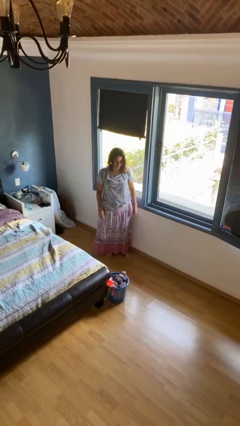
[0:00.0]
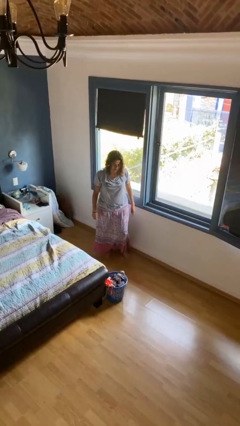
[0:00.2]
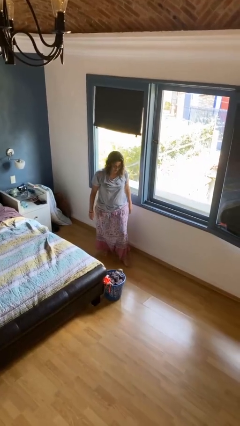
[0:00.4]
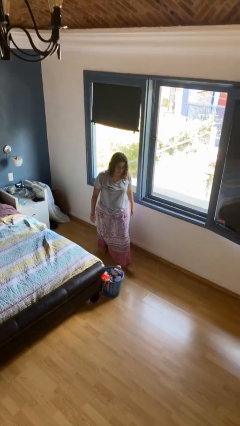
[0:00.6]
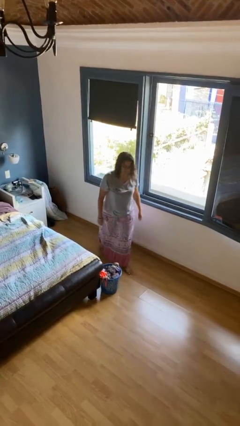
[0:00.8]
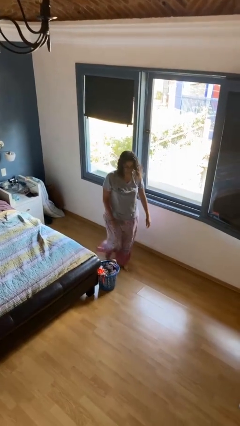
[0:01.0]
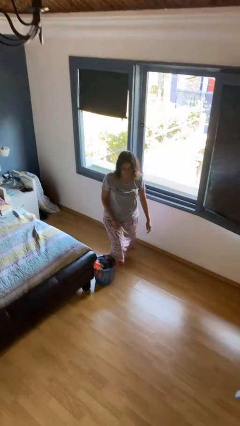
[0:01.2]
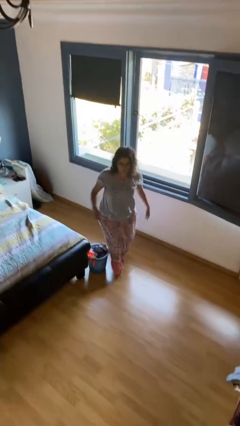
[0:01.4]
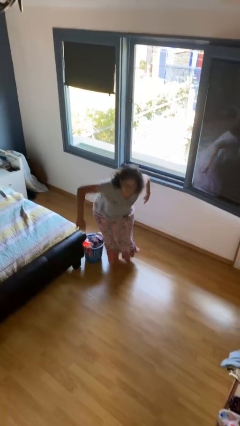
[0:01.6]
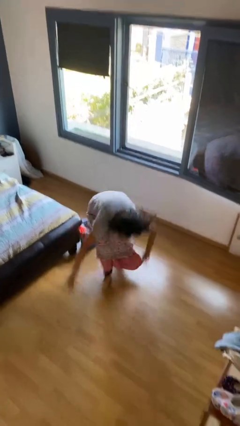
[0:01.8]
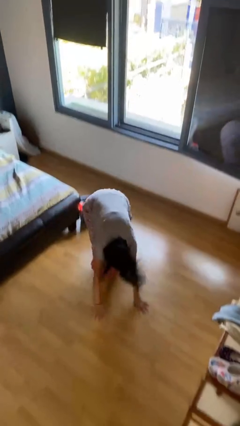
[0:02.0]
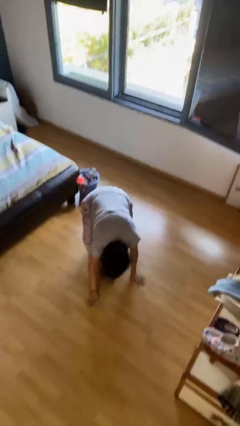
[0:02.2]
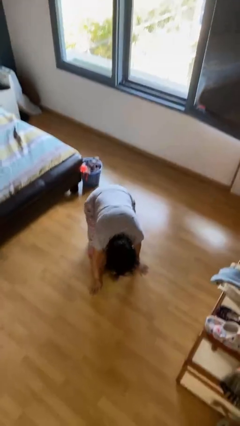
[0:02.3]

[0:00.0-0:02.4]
person trips on object on floor

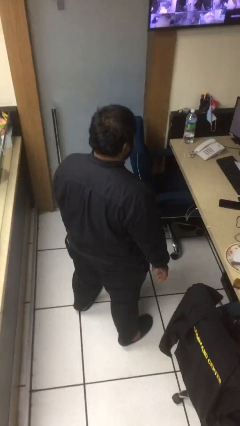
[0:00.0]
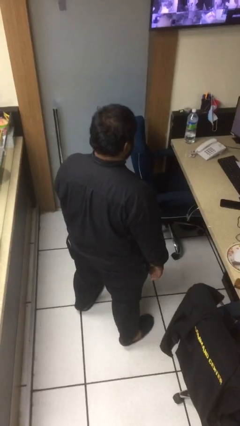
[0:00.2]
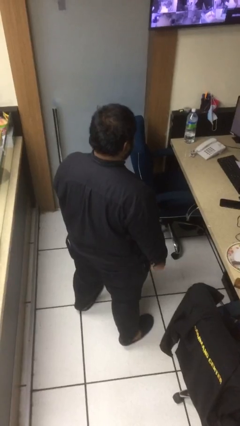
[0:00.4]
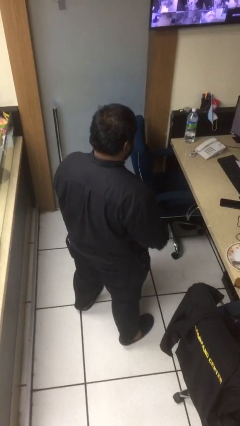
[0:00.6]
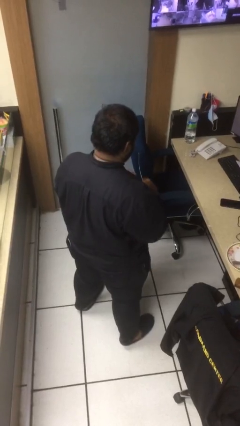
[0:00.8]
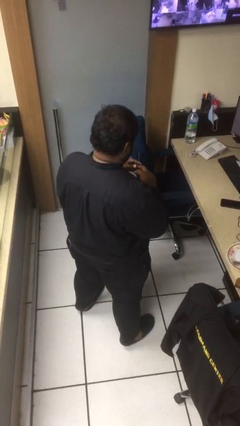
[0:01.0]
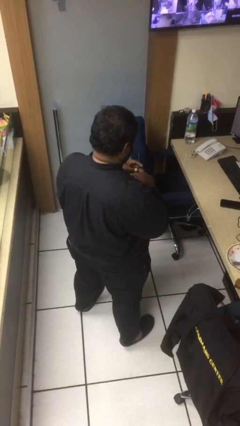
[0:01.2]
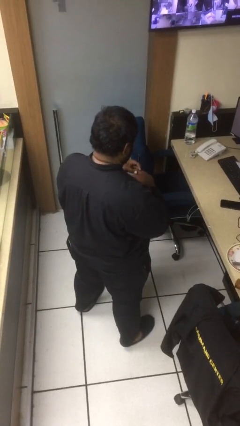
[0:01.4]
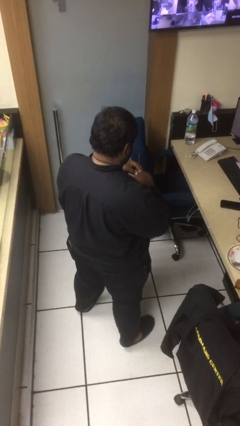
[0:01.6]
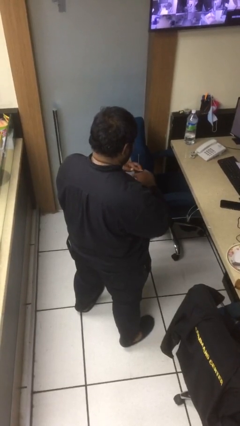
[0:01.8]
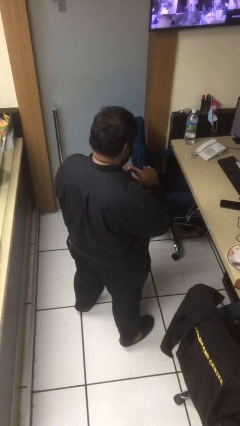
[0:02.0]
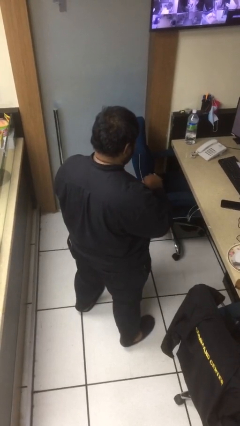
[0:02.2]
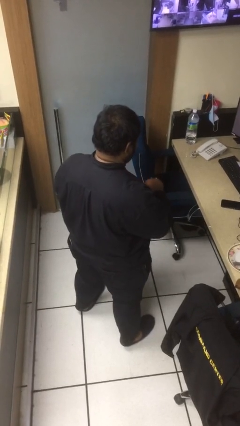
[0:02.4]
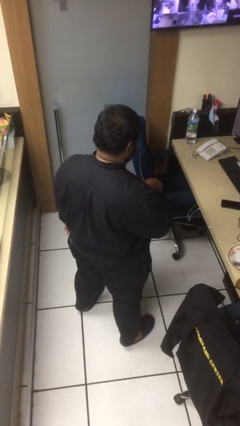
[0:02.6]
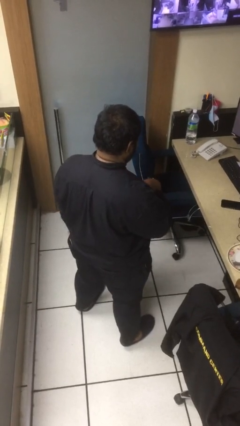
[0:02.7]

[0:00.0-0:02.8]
person puts on ring

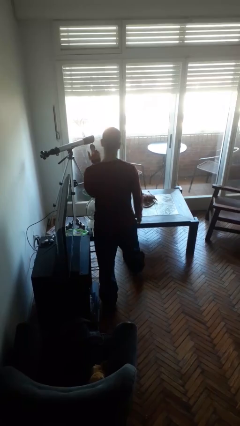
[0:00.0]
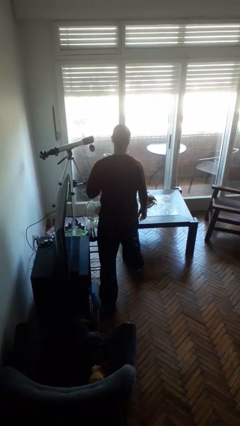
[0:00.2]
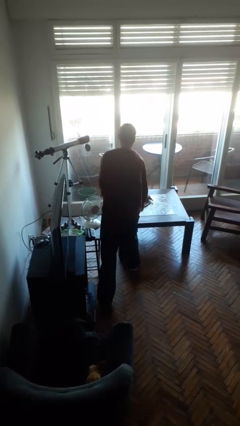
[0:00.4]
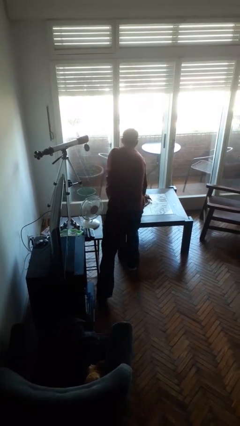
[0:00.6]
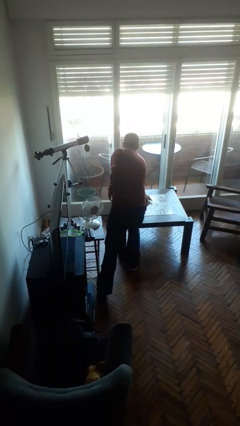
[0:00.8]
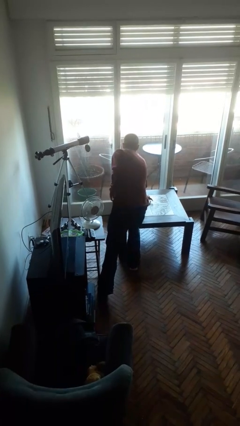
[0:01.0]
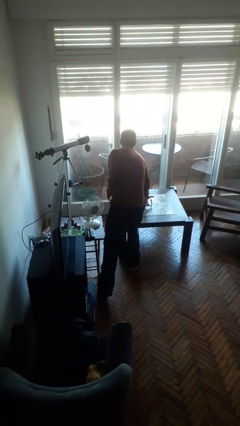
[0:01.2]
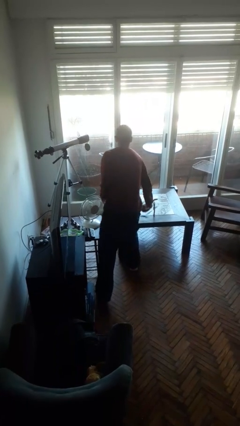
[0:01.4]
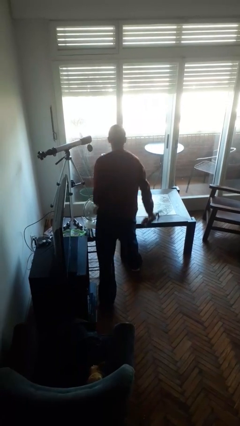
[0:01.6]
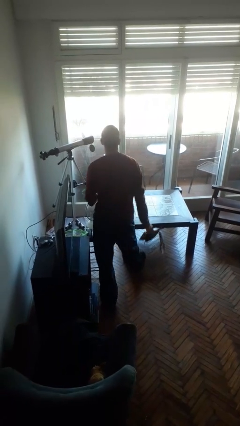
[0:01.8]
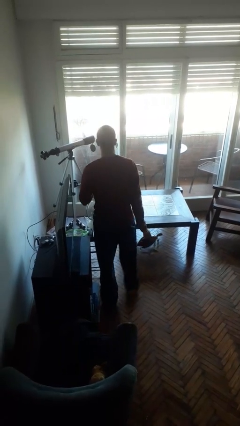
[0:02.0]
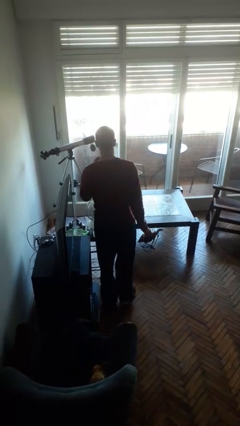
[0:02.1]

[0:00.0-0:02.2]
person picks up object from table

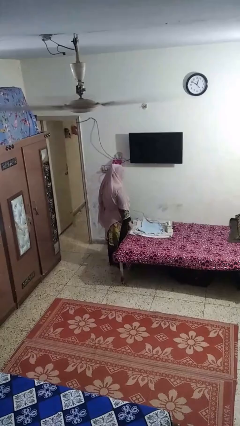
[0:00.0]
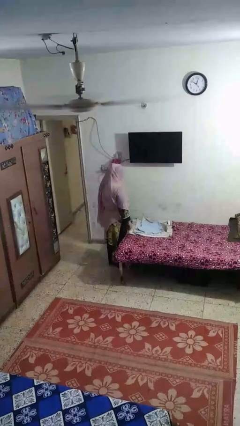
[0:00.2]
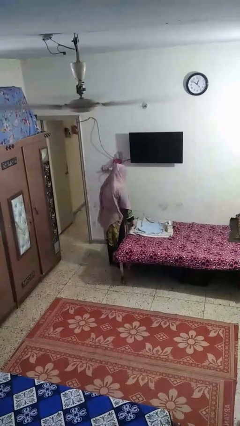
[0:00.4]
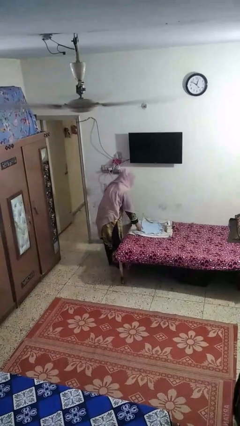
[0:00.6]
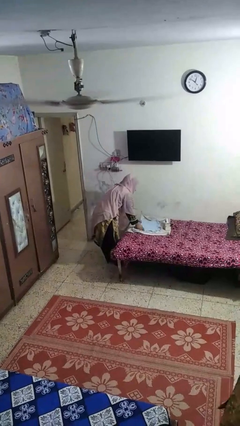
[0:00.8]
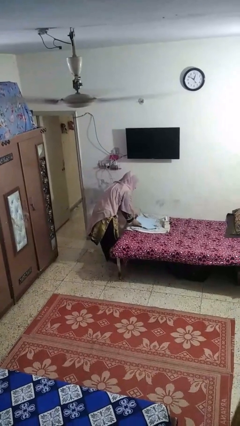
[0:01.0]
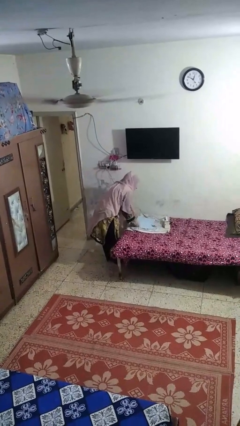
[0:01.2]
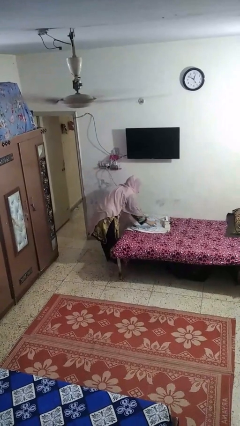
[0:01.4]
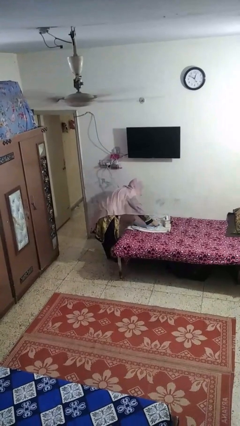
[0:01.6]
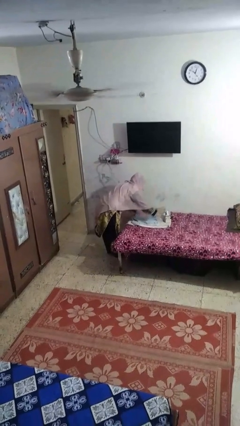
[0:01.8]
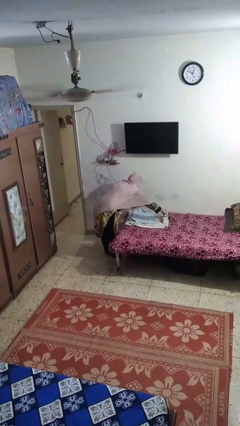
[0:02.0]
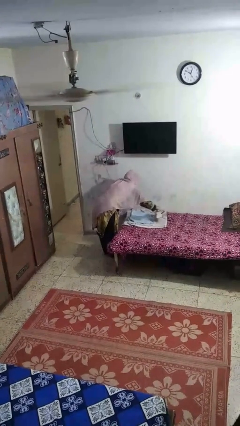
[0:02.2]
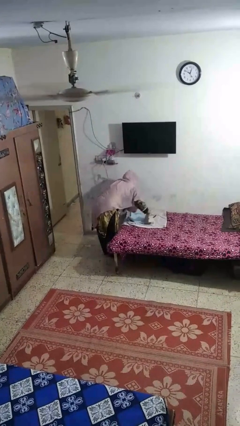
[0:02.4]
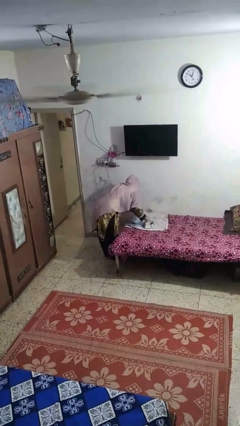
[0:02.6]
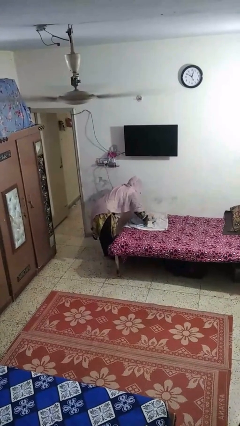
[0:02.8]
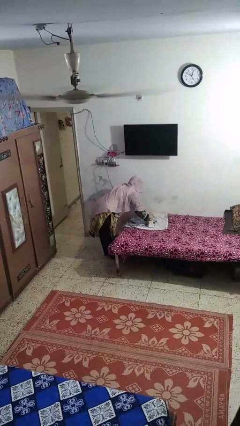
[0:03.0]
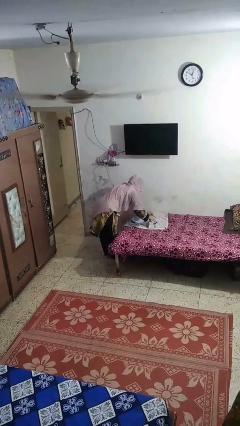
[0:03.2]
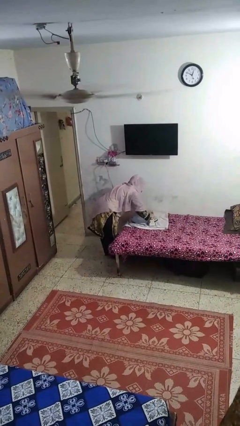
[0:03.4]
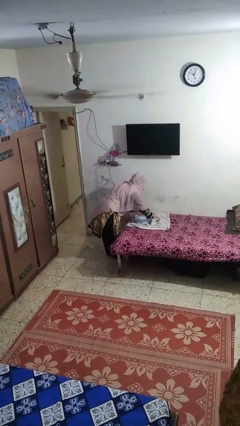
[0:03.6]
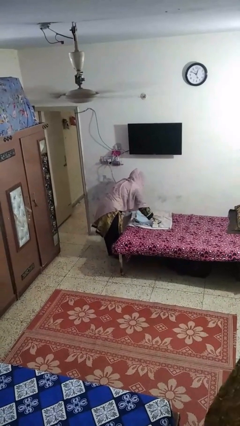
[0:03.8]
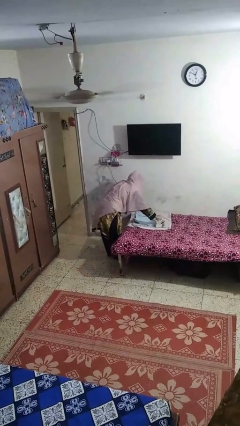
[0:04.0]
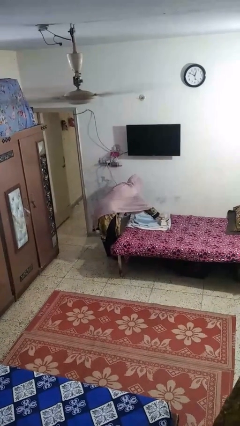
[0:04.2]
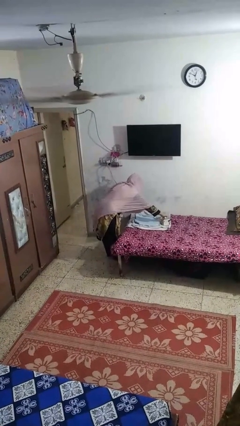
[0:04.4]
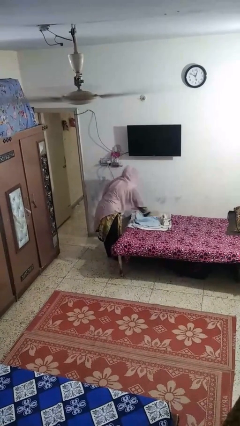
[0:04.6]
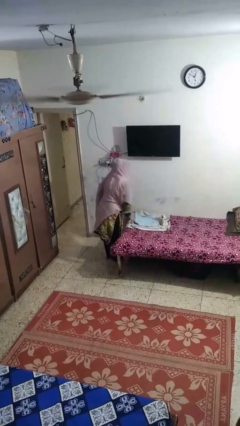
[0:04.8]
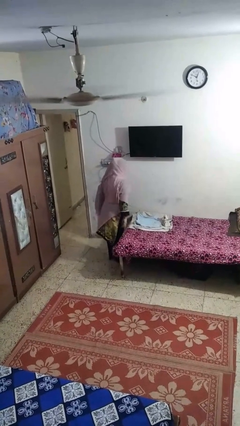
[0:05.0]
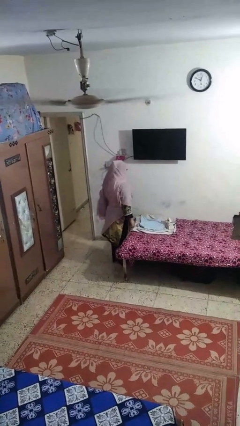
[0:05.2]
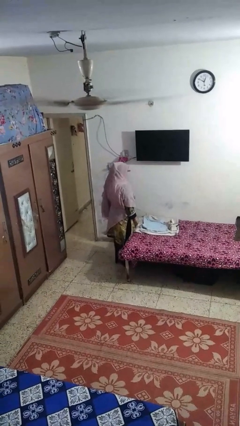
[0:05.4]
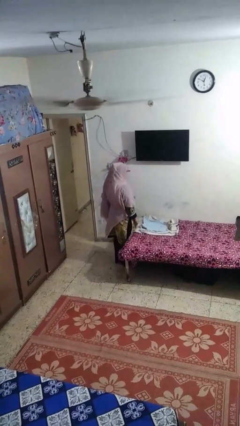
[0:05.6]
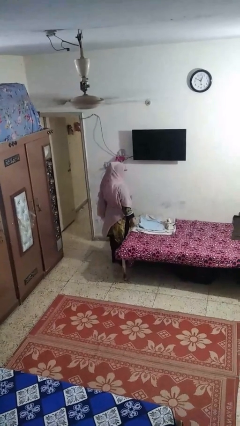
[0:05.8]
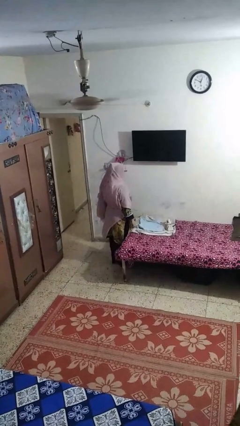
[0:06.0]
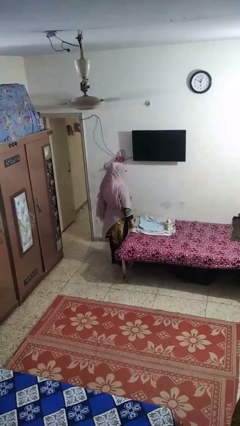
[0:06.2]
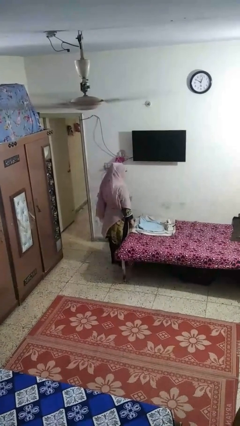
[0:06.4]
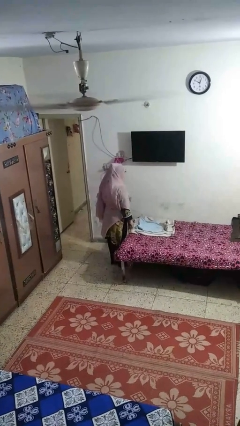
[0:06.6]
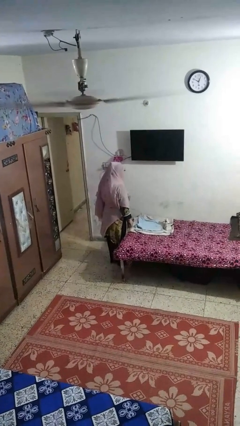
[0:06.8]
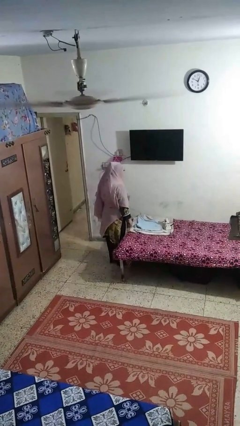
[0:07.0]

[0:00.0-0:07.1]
person irons clothes

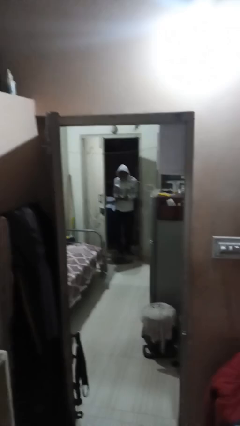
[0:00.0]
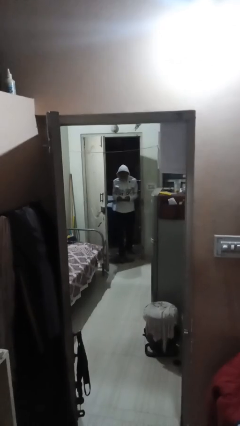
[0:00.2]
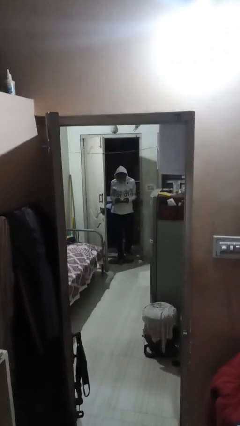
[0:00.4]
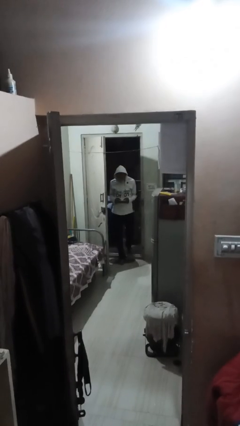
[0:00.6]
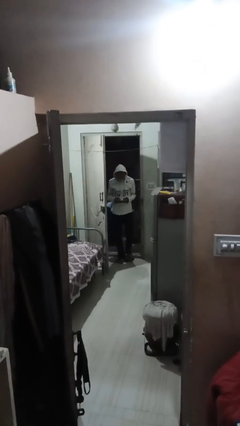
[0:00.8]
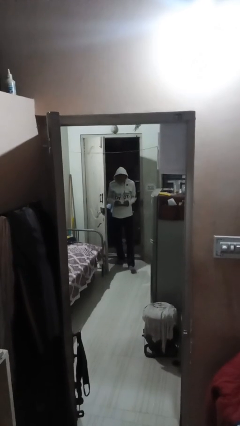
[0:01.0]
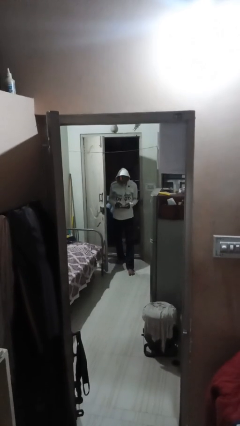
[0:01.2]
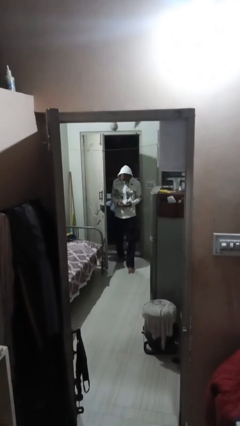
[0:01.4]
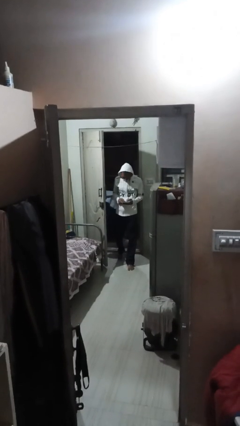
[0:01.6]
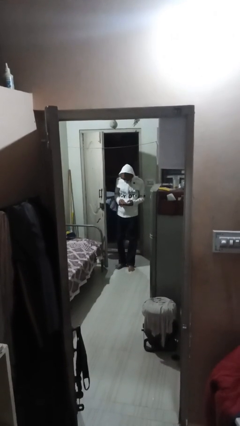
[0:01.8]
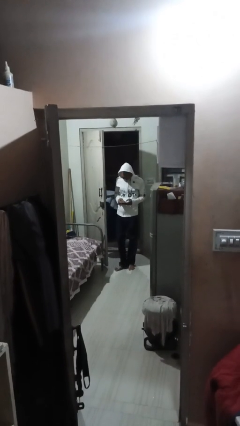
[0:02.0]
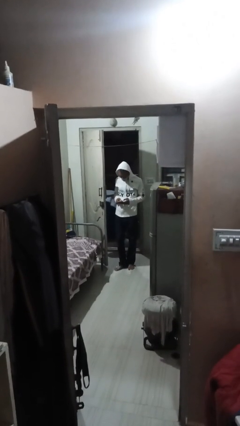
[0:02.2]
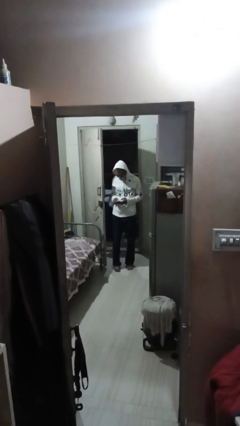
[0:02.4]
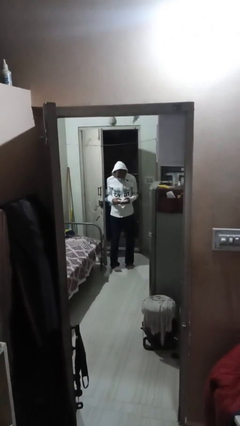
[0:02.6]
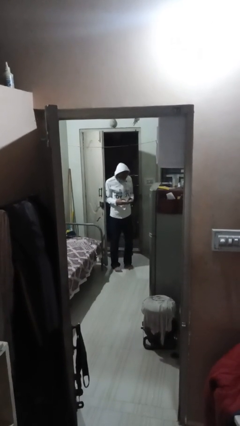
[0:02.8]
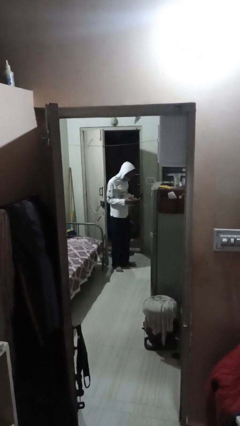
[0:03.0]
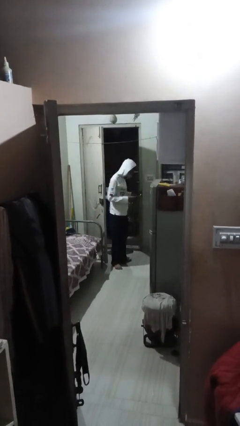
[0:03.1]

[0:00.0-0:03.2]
person enters scene through structure

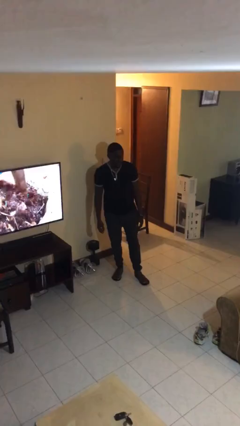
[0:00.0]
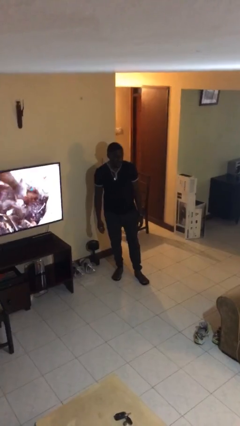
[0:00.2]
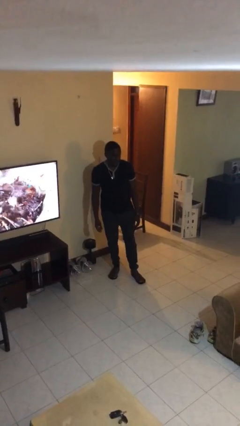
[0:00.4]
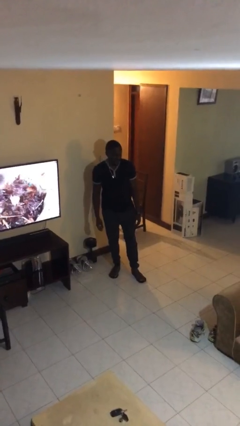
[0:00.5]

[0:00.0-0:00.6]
person covers face with hands
